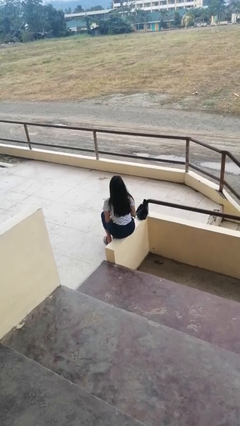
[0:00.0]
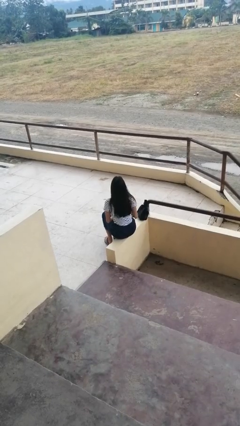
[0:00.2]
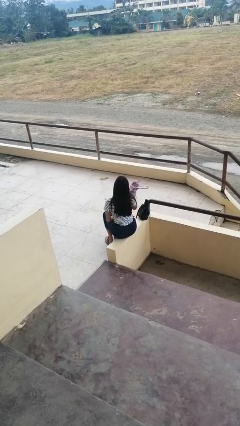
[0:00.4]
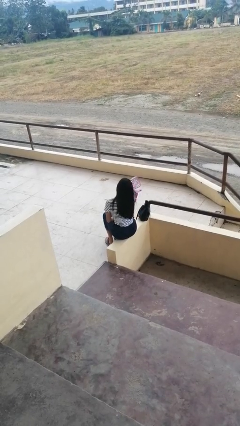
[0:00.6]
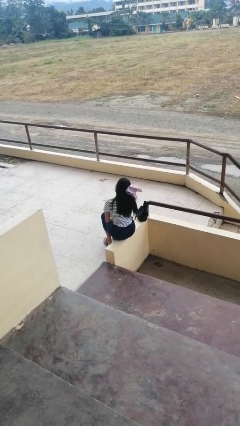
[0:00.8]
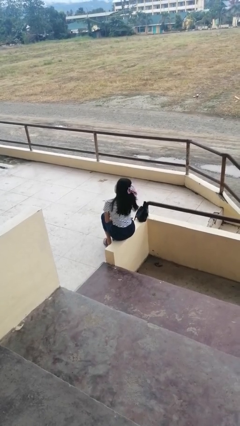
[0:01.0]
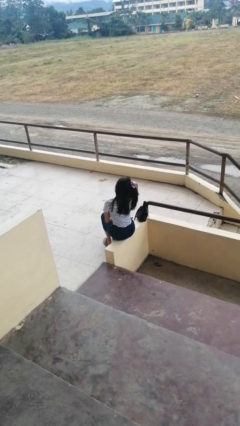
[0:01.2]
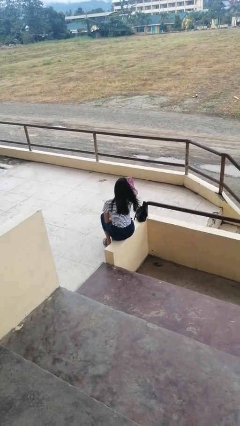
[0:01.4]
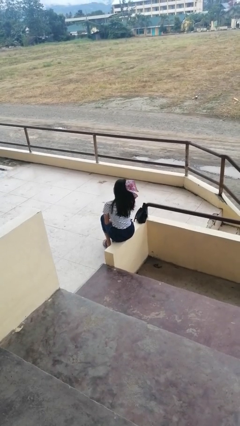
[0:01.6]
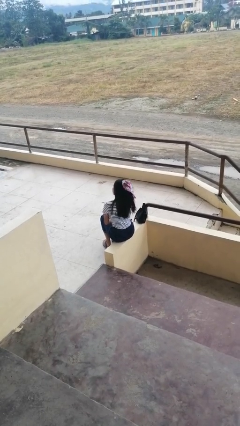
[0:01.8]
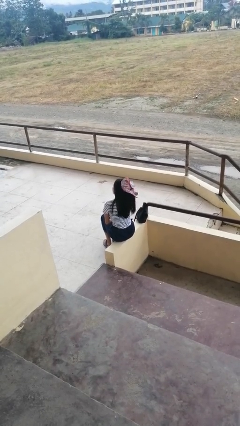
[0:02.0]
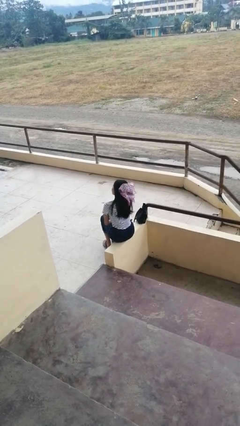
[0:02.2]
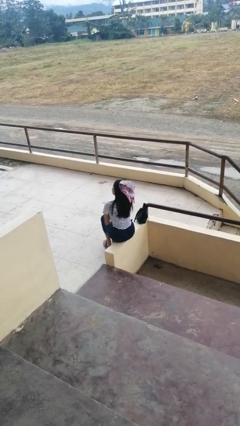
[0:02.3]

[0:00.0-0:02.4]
person dries hair with towel

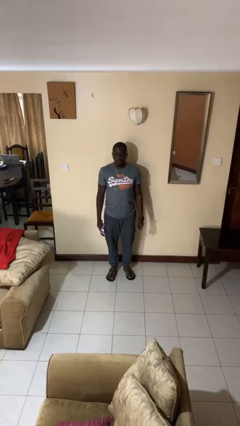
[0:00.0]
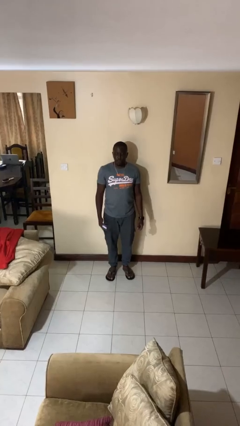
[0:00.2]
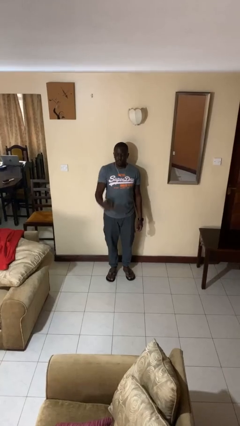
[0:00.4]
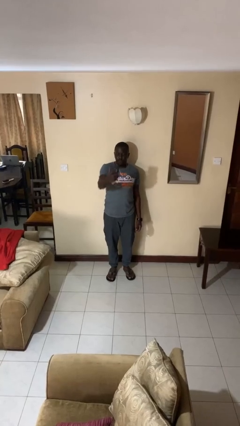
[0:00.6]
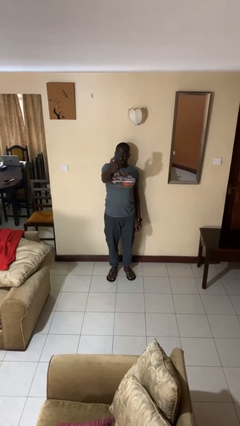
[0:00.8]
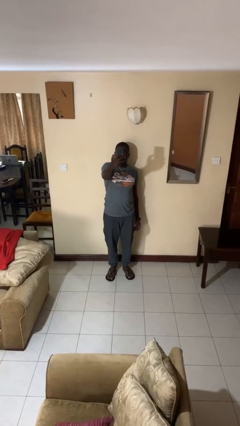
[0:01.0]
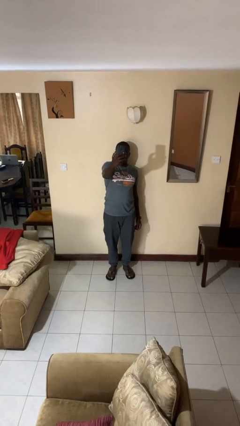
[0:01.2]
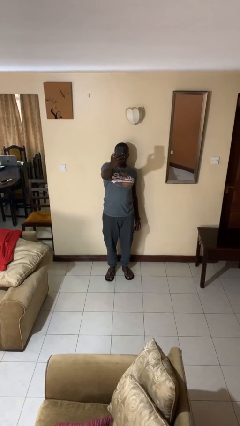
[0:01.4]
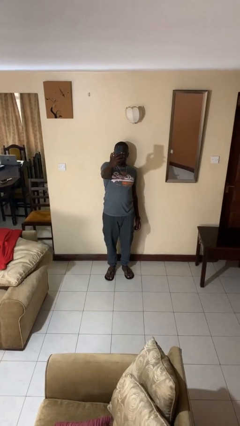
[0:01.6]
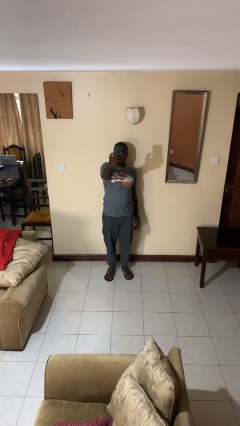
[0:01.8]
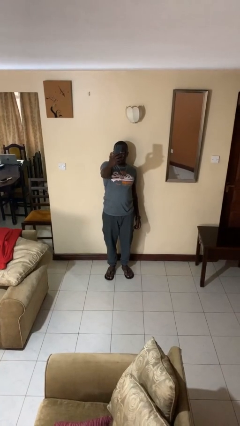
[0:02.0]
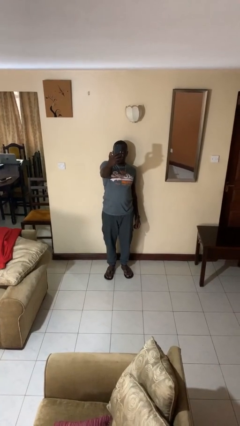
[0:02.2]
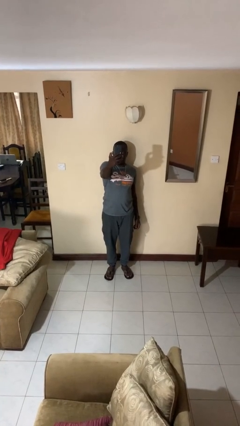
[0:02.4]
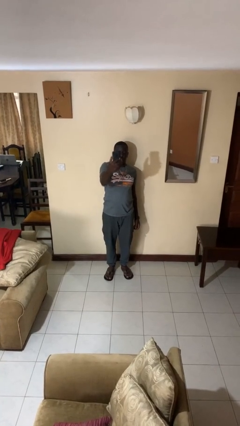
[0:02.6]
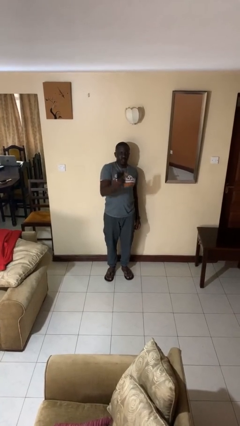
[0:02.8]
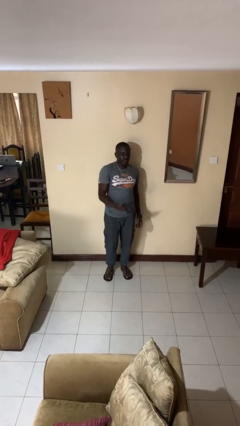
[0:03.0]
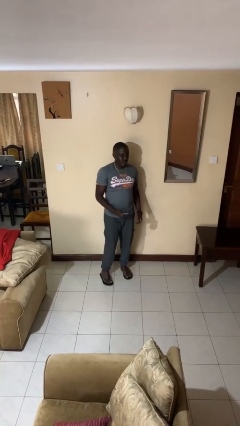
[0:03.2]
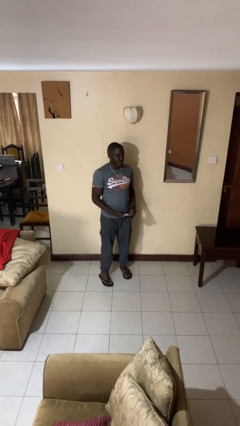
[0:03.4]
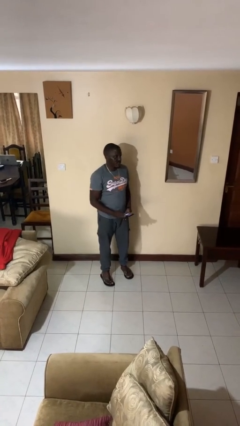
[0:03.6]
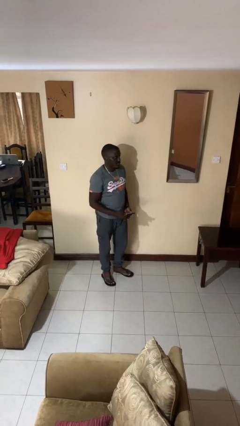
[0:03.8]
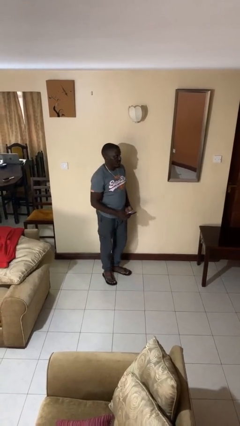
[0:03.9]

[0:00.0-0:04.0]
person takes selfie

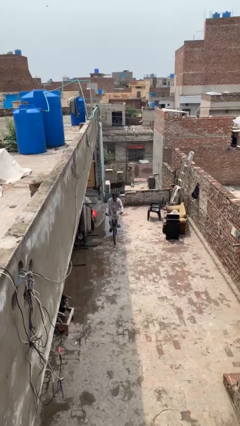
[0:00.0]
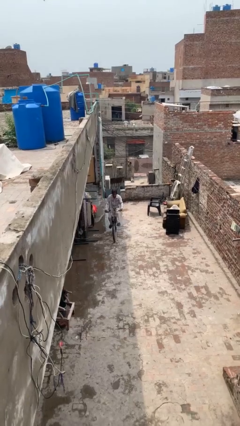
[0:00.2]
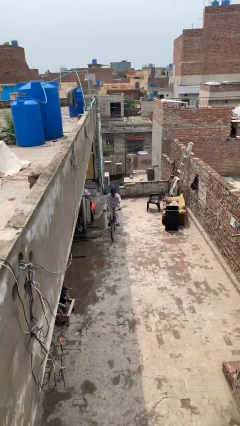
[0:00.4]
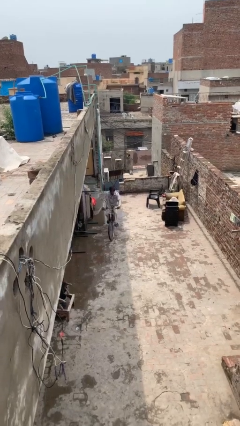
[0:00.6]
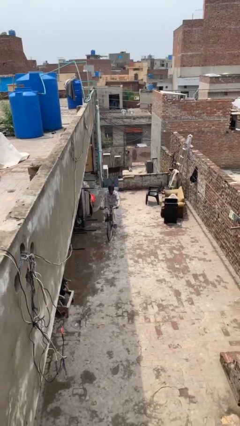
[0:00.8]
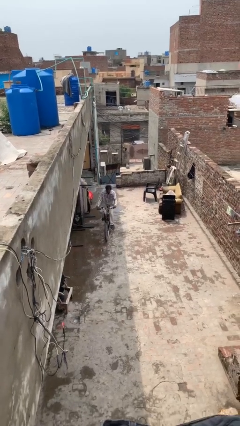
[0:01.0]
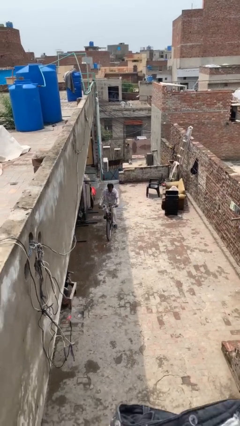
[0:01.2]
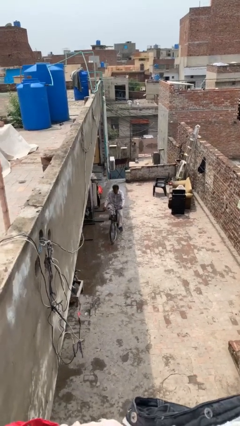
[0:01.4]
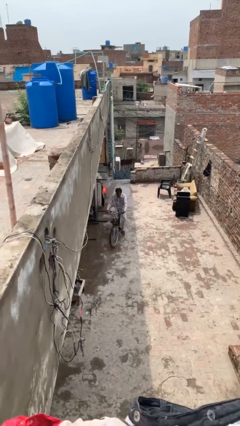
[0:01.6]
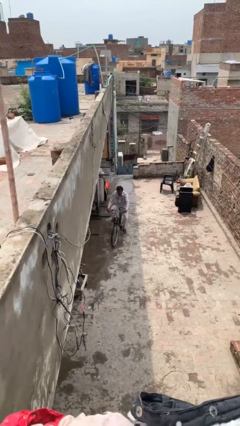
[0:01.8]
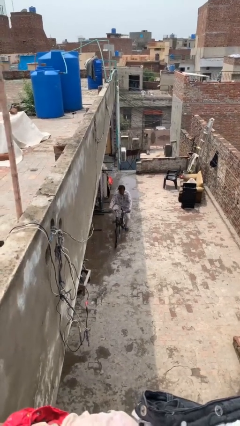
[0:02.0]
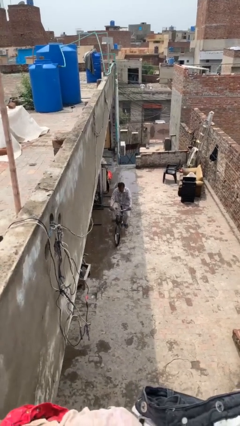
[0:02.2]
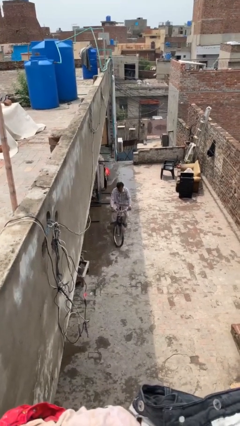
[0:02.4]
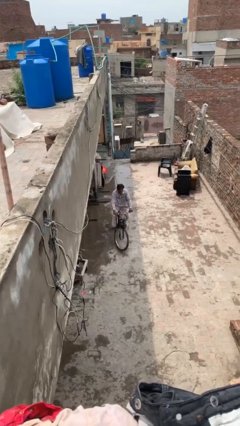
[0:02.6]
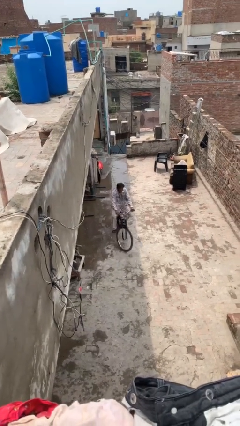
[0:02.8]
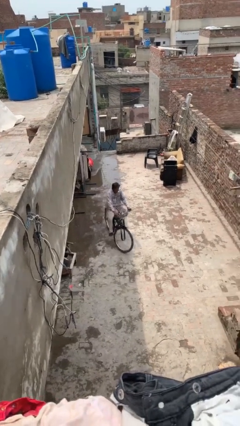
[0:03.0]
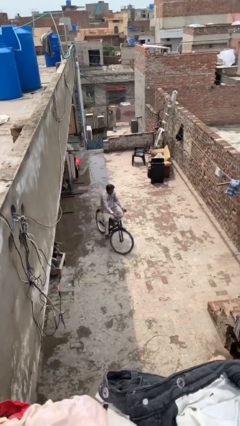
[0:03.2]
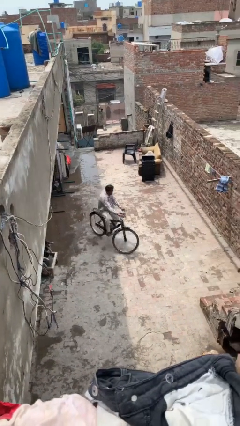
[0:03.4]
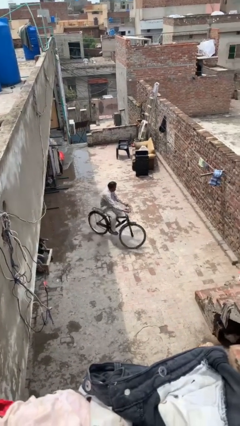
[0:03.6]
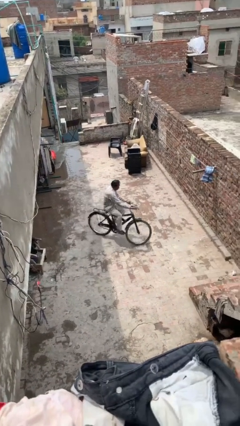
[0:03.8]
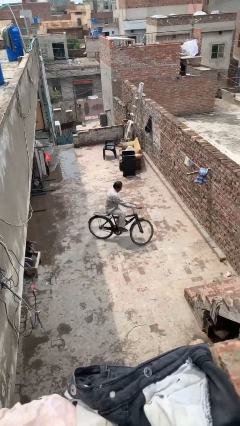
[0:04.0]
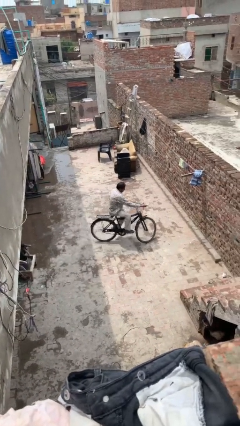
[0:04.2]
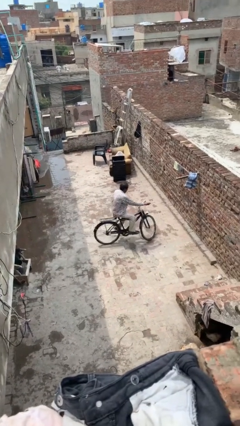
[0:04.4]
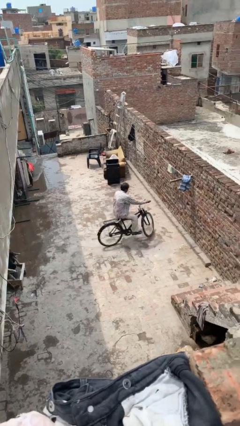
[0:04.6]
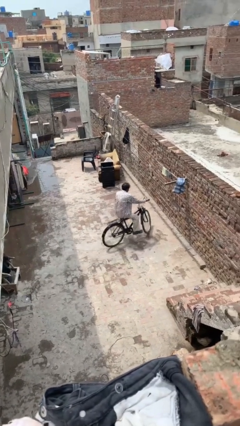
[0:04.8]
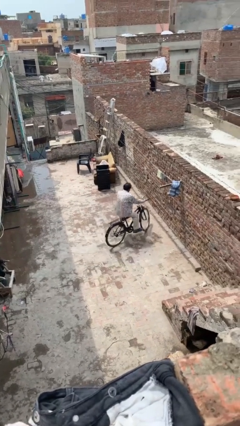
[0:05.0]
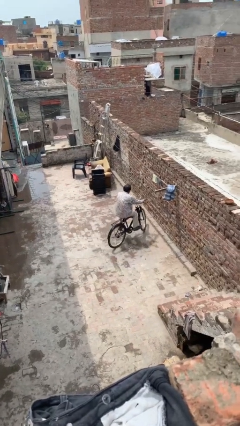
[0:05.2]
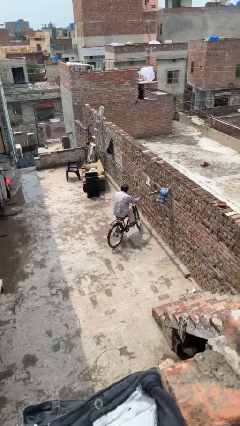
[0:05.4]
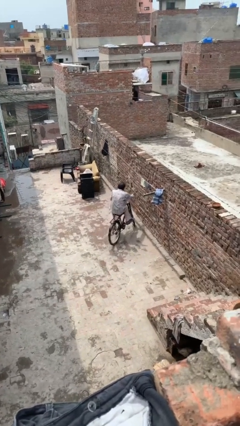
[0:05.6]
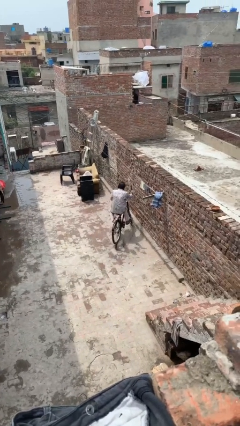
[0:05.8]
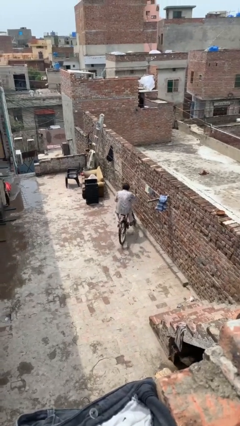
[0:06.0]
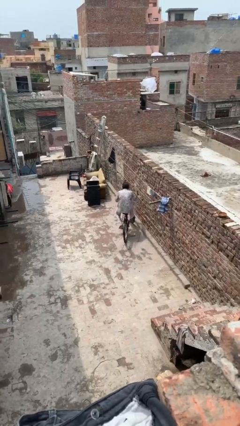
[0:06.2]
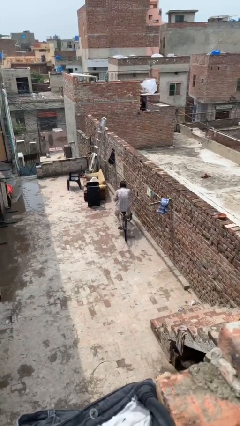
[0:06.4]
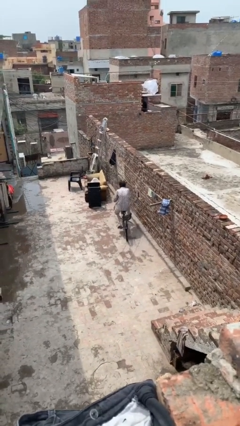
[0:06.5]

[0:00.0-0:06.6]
person rides bicycle

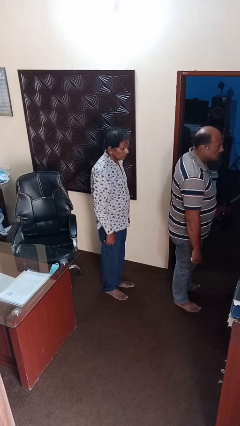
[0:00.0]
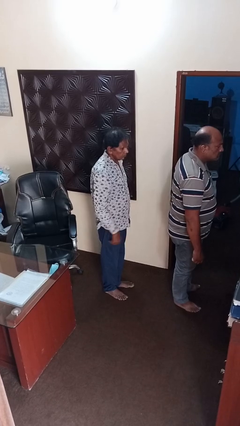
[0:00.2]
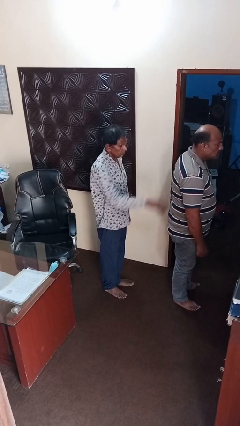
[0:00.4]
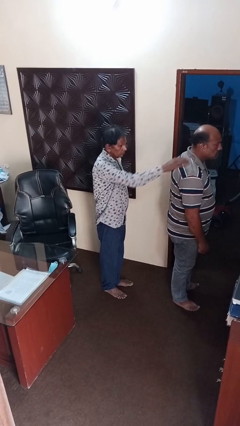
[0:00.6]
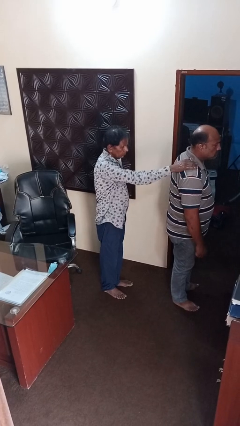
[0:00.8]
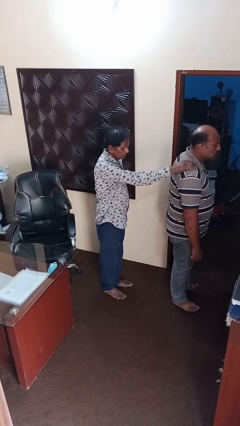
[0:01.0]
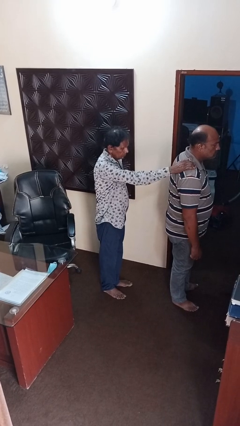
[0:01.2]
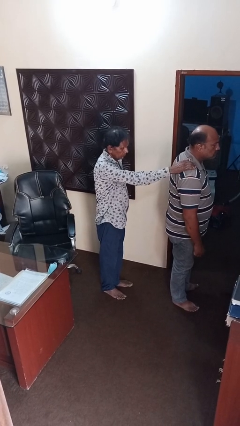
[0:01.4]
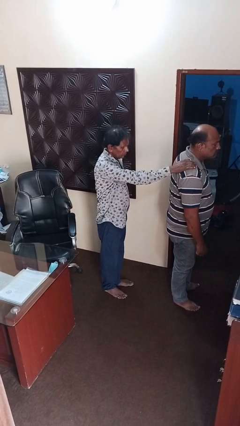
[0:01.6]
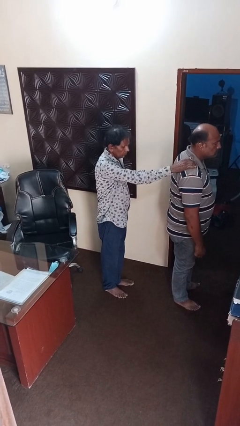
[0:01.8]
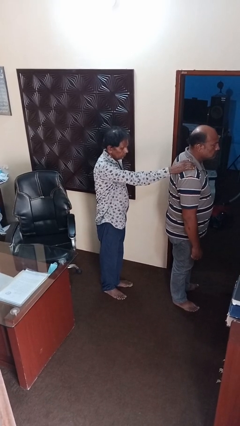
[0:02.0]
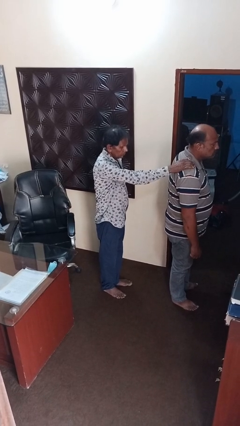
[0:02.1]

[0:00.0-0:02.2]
person grabs person by shoulder

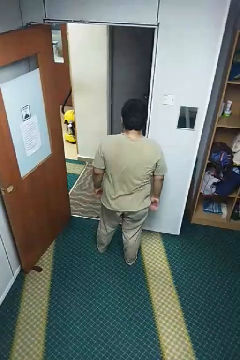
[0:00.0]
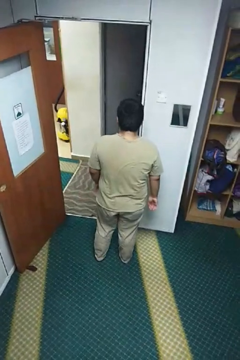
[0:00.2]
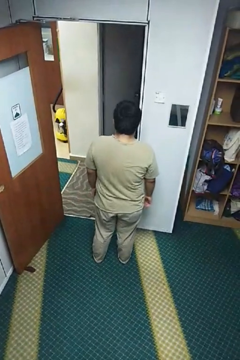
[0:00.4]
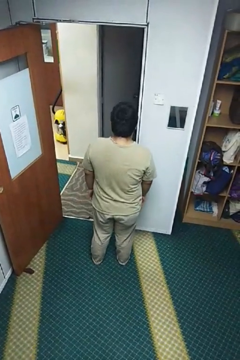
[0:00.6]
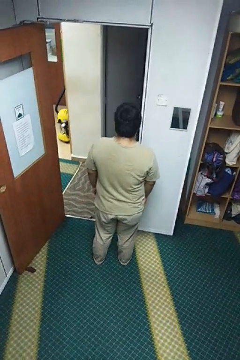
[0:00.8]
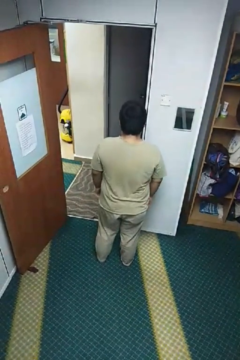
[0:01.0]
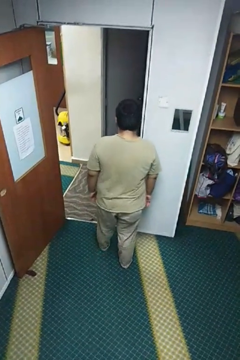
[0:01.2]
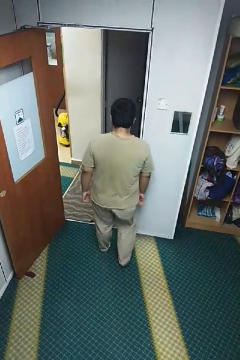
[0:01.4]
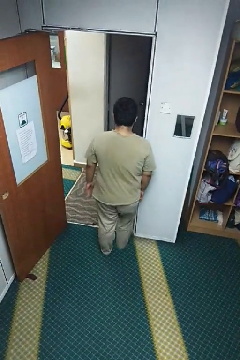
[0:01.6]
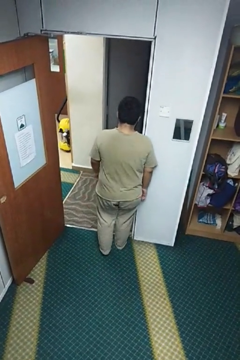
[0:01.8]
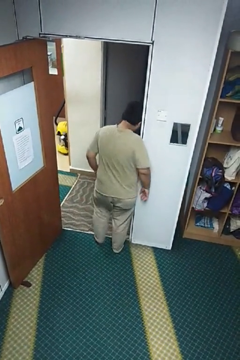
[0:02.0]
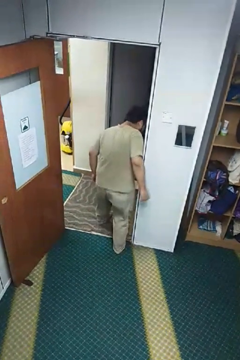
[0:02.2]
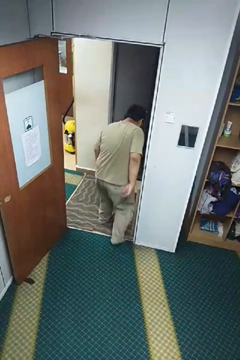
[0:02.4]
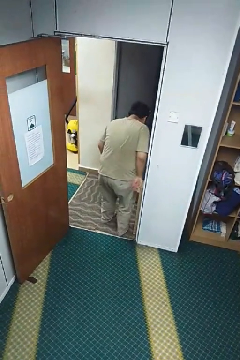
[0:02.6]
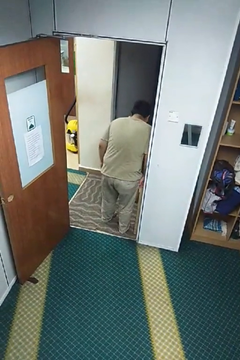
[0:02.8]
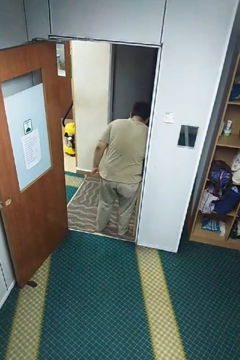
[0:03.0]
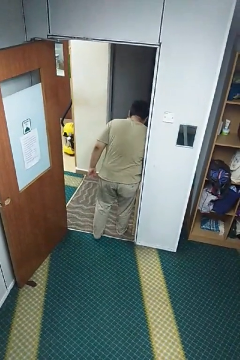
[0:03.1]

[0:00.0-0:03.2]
person bumps into wall
